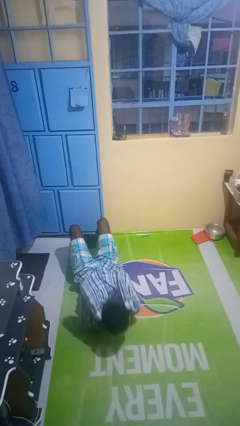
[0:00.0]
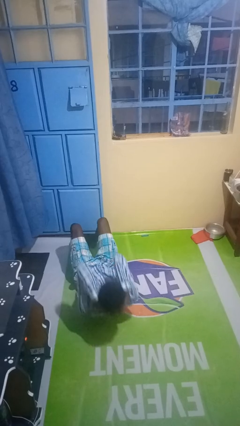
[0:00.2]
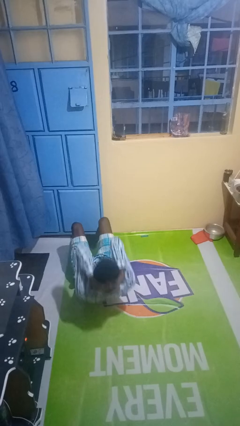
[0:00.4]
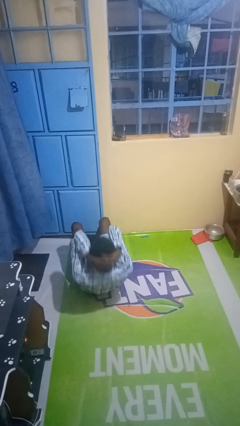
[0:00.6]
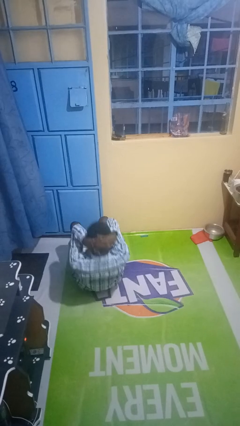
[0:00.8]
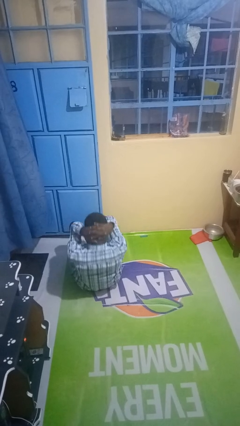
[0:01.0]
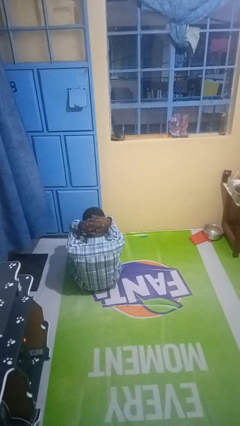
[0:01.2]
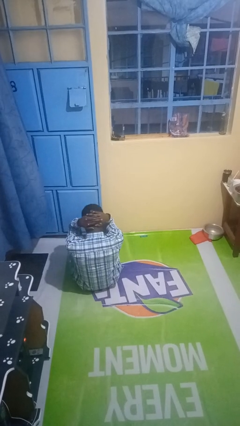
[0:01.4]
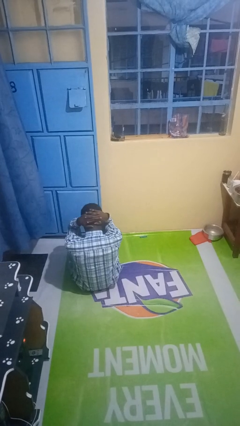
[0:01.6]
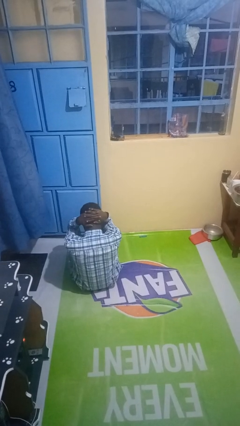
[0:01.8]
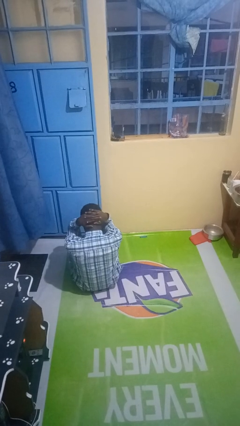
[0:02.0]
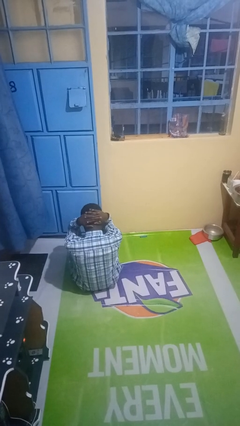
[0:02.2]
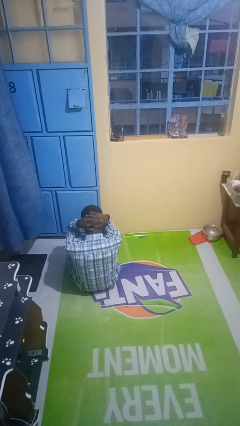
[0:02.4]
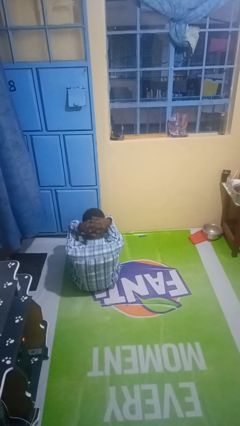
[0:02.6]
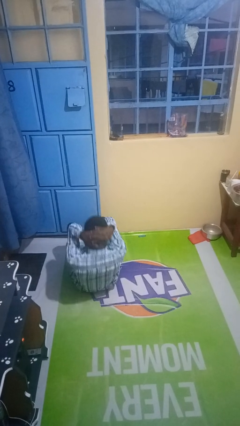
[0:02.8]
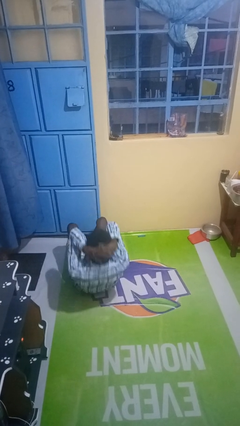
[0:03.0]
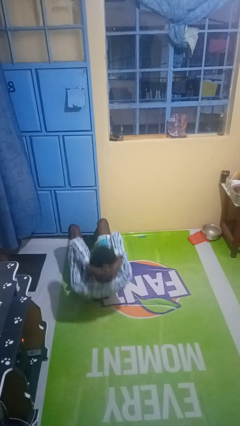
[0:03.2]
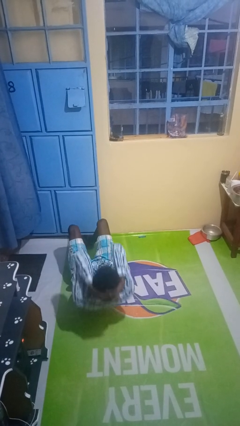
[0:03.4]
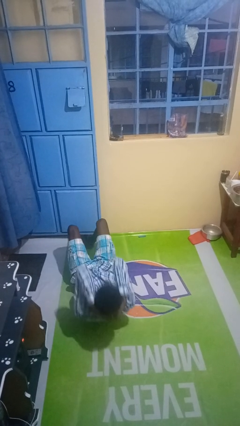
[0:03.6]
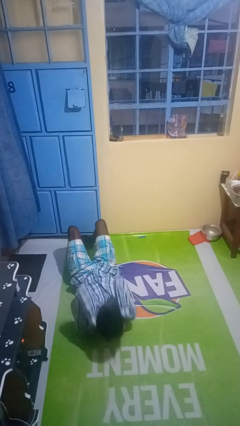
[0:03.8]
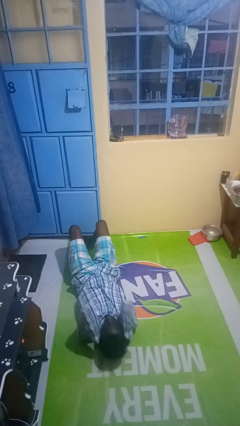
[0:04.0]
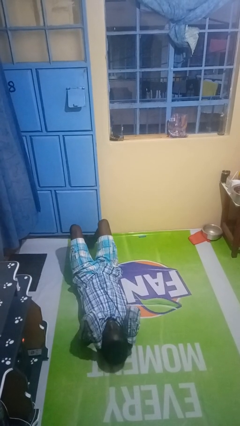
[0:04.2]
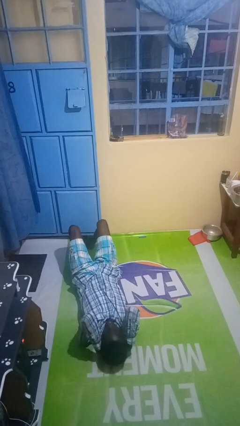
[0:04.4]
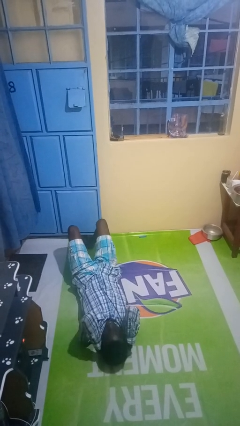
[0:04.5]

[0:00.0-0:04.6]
person exercises with situp

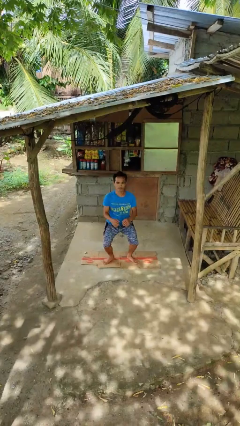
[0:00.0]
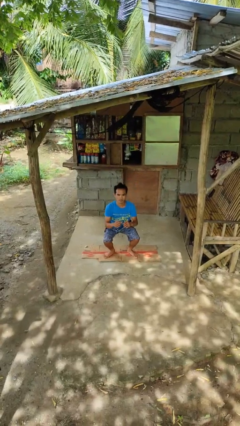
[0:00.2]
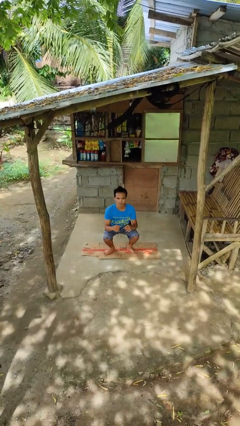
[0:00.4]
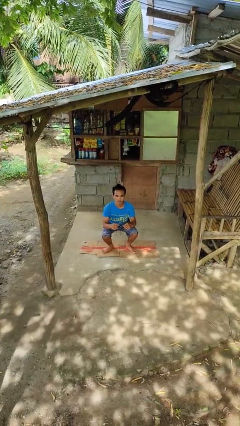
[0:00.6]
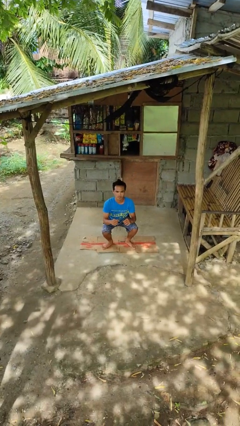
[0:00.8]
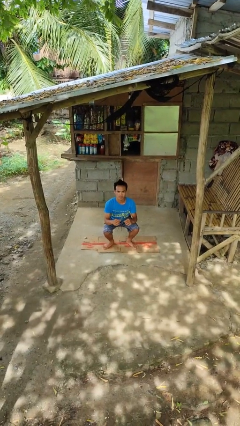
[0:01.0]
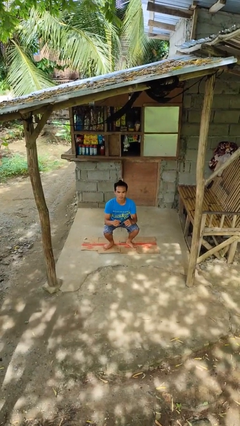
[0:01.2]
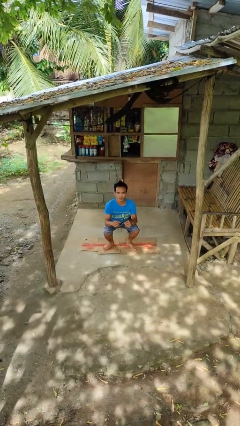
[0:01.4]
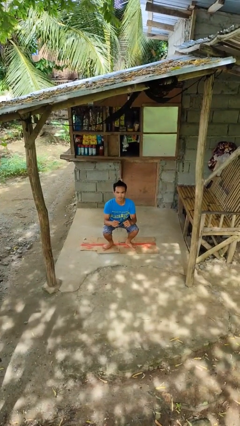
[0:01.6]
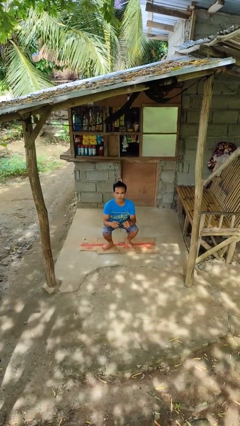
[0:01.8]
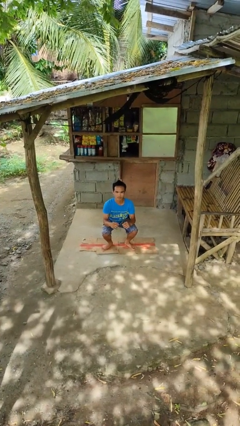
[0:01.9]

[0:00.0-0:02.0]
person squats

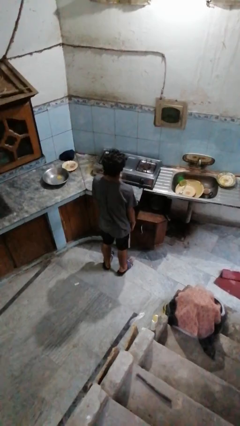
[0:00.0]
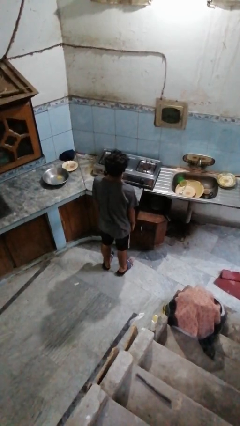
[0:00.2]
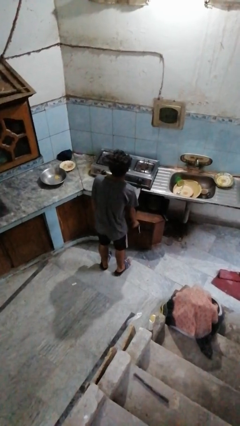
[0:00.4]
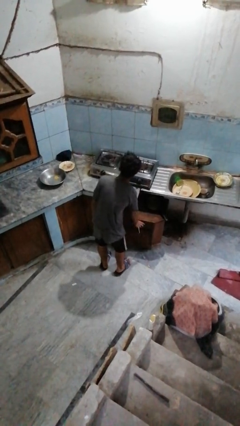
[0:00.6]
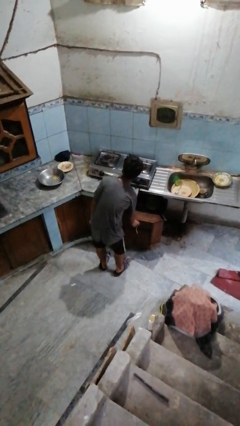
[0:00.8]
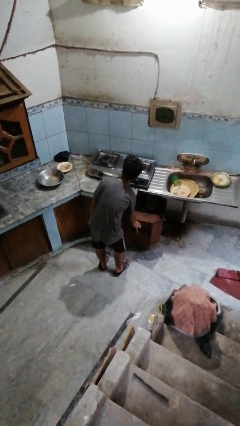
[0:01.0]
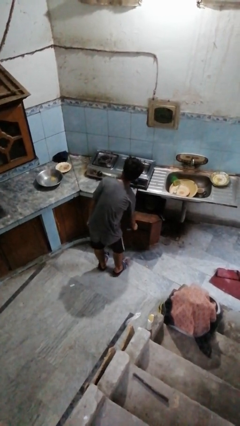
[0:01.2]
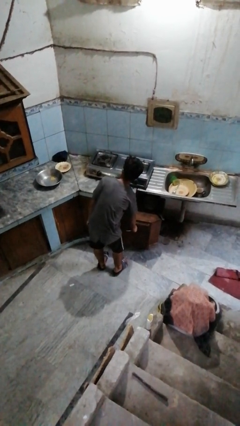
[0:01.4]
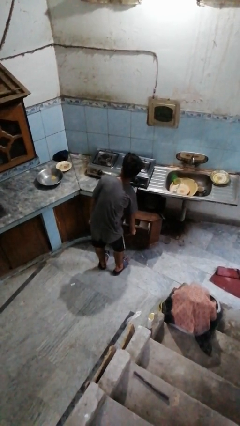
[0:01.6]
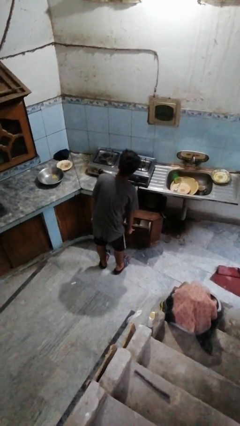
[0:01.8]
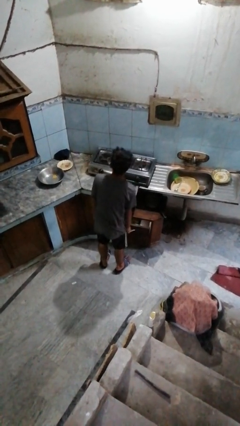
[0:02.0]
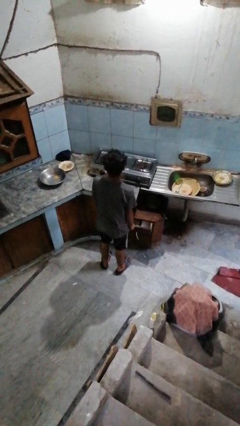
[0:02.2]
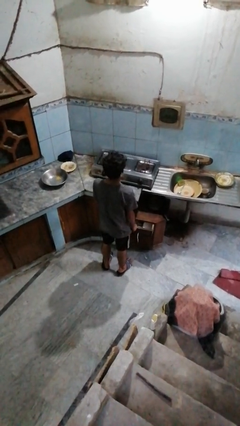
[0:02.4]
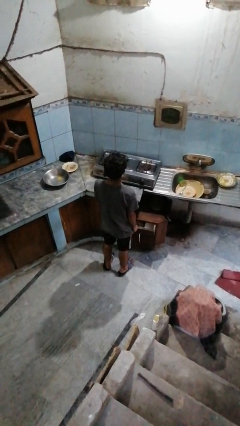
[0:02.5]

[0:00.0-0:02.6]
person opens kitchen drawer

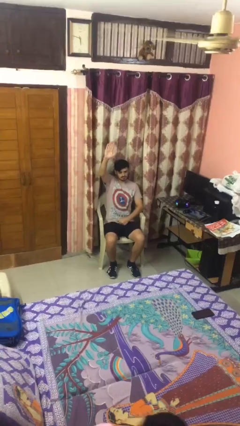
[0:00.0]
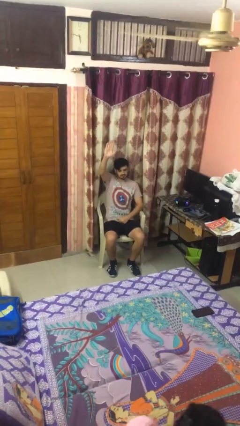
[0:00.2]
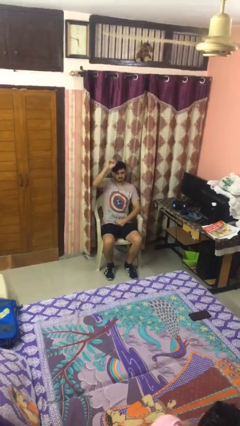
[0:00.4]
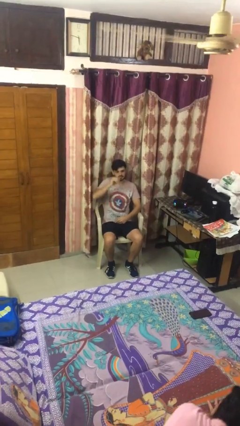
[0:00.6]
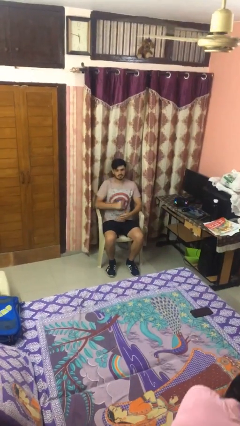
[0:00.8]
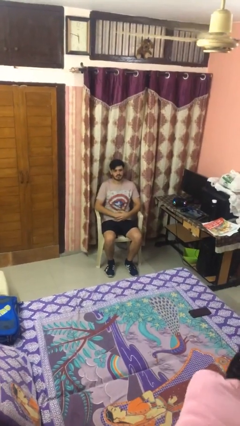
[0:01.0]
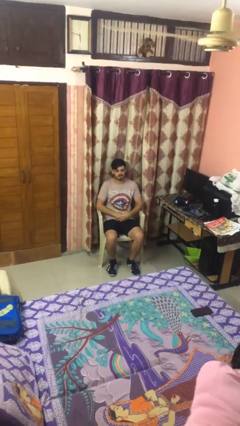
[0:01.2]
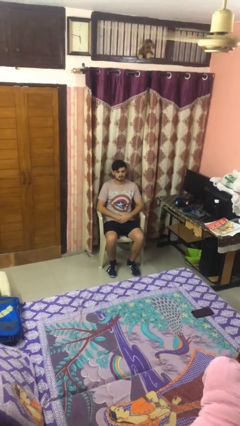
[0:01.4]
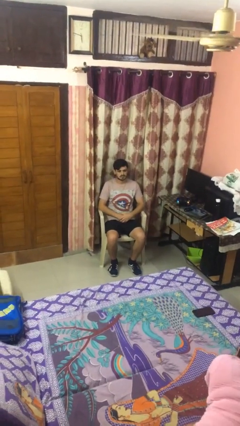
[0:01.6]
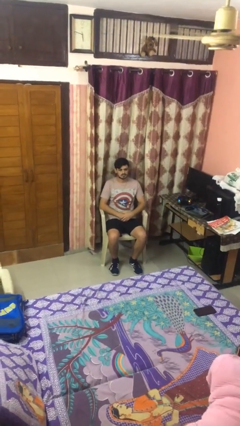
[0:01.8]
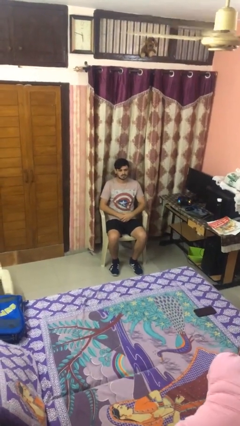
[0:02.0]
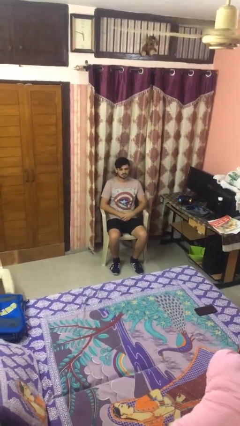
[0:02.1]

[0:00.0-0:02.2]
person gestures lower hand

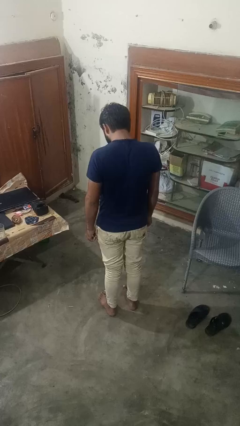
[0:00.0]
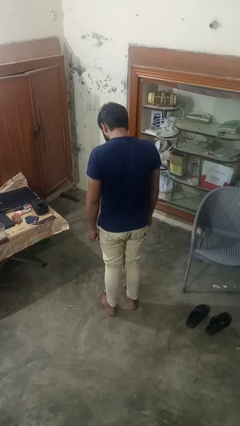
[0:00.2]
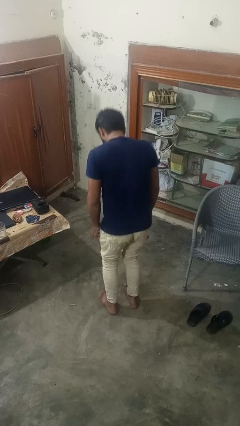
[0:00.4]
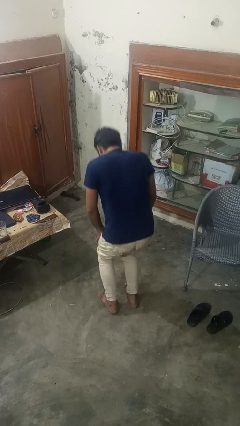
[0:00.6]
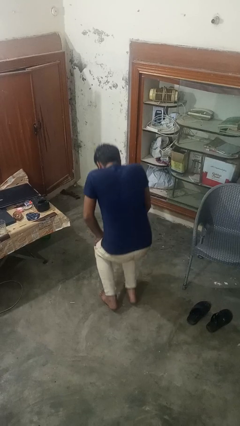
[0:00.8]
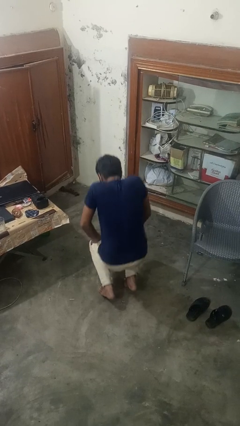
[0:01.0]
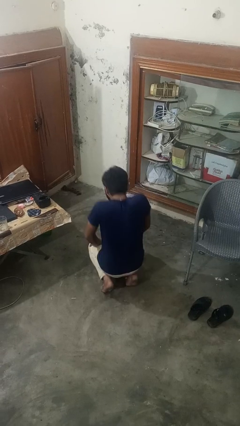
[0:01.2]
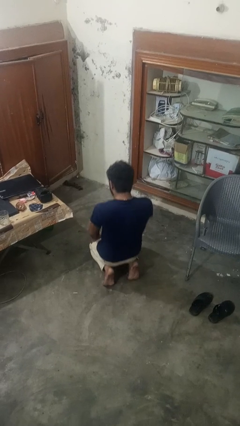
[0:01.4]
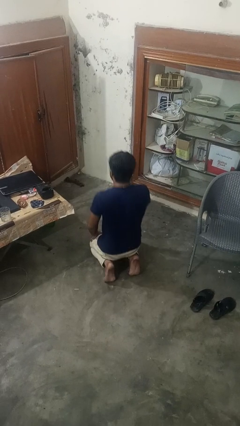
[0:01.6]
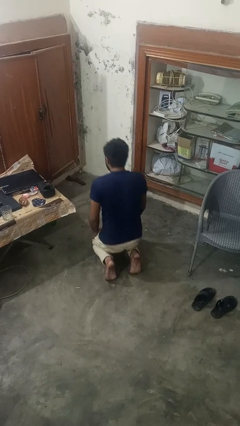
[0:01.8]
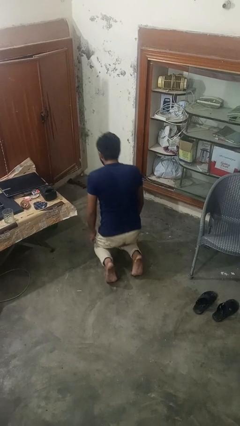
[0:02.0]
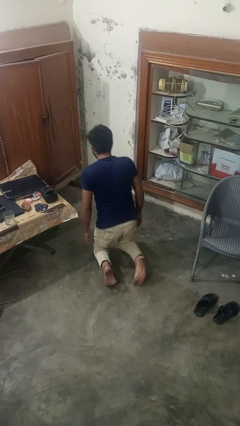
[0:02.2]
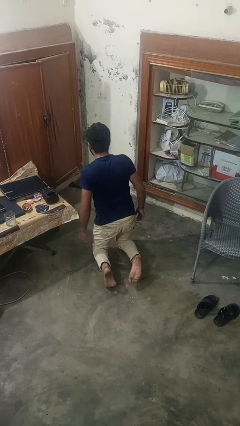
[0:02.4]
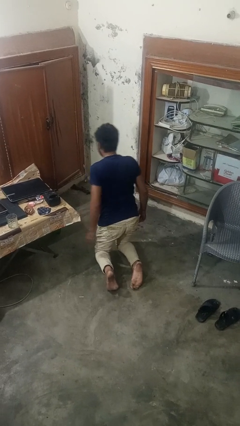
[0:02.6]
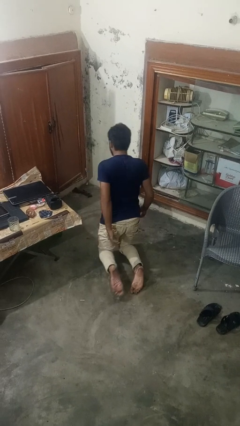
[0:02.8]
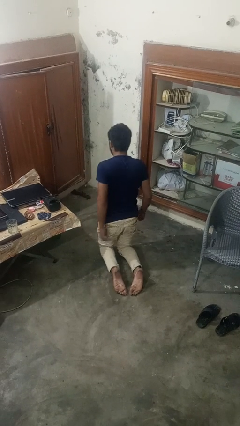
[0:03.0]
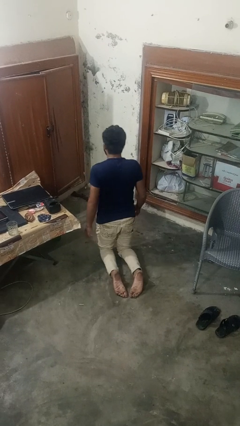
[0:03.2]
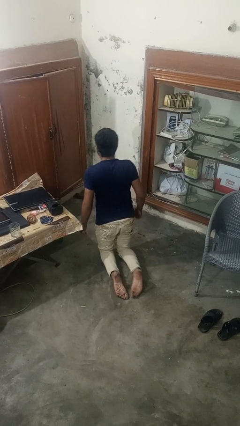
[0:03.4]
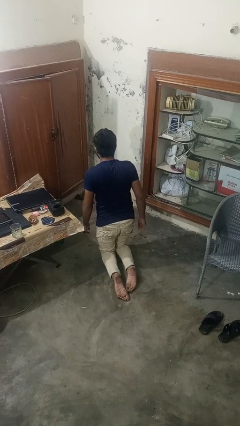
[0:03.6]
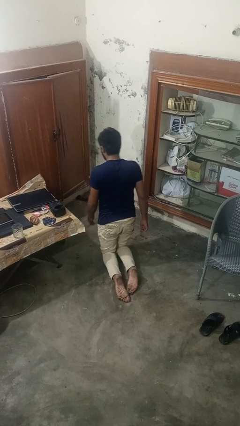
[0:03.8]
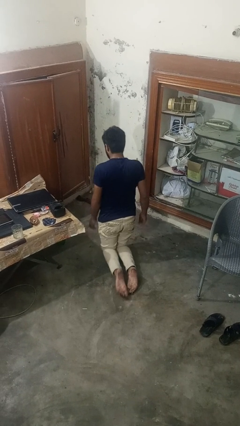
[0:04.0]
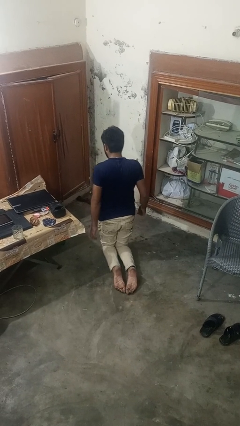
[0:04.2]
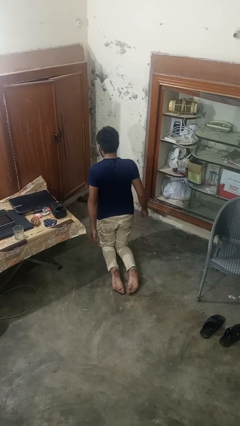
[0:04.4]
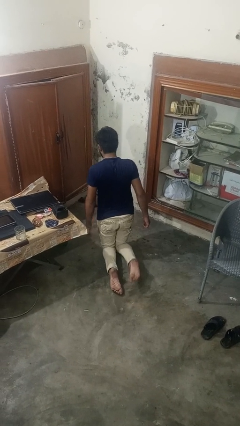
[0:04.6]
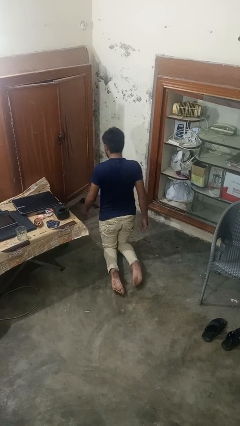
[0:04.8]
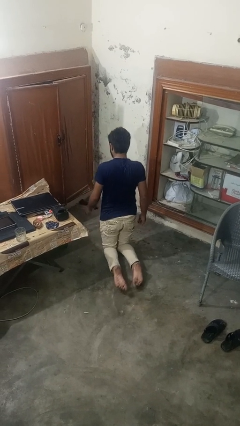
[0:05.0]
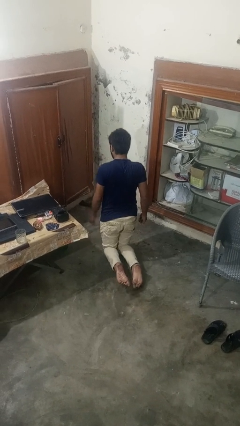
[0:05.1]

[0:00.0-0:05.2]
person exercises with lunges

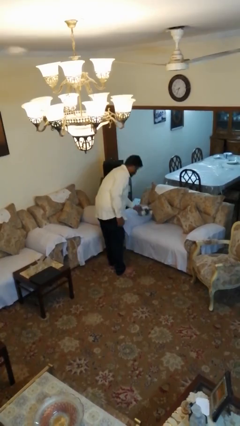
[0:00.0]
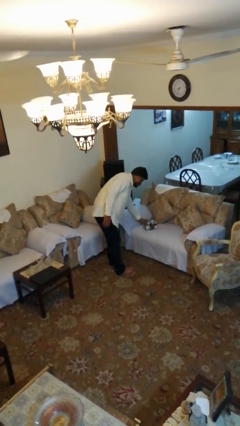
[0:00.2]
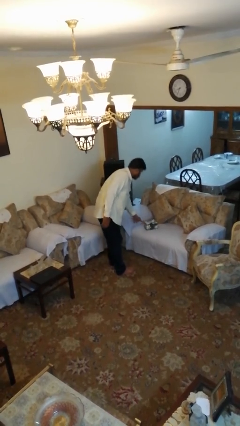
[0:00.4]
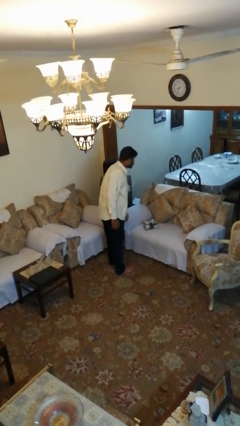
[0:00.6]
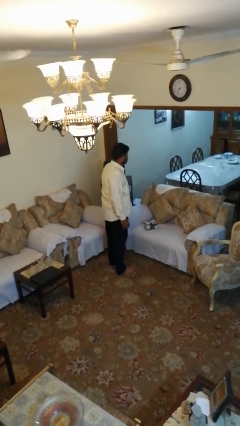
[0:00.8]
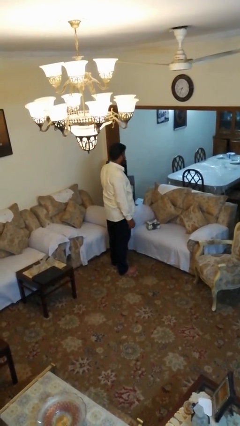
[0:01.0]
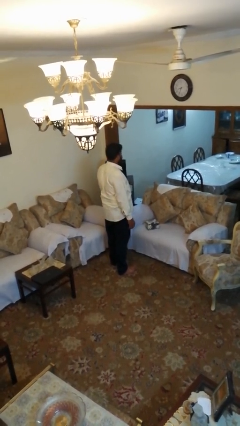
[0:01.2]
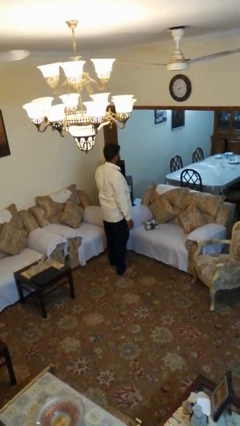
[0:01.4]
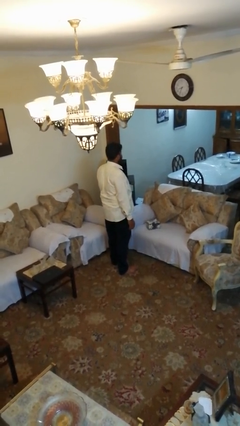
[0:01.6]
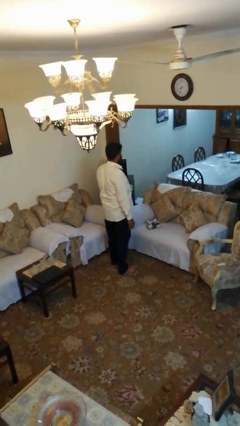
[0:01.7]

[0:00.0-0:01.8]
person puts down object on couch
